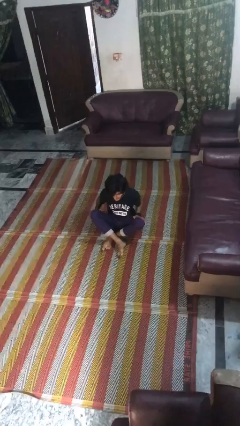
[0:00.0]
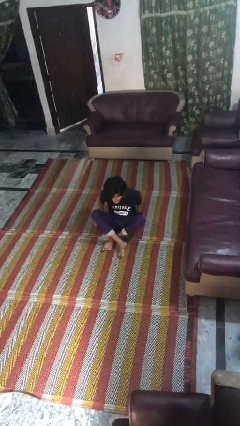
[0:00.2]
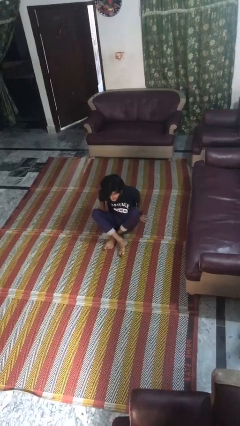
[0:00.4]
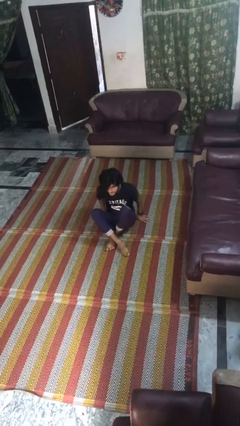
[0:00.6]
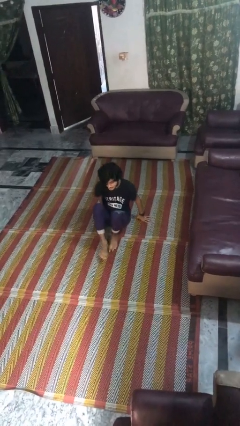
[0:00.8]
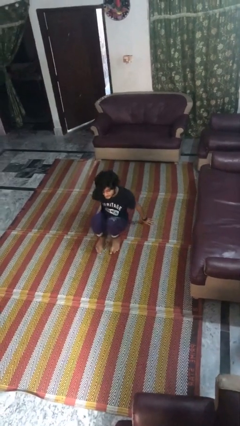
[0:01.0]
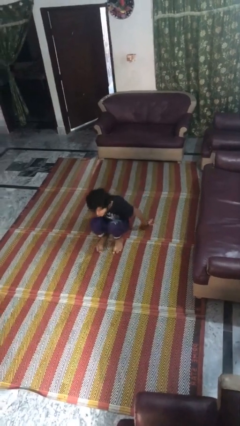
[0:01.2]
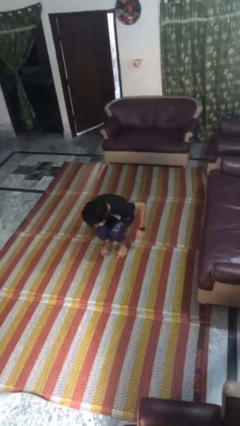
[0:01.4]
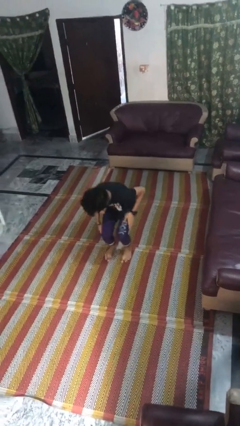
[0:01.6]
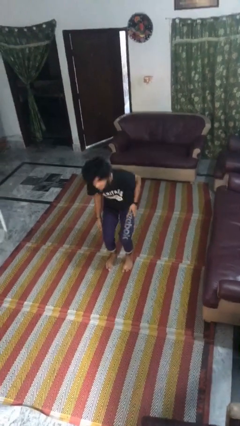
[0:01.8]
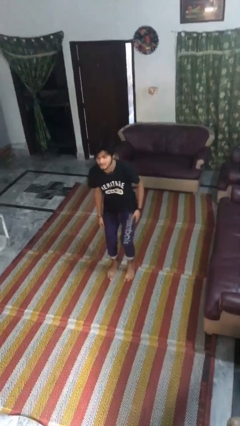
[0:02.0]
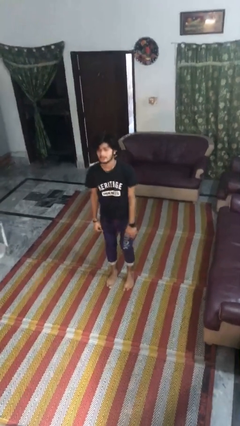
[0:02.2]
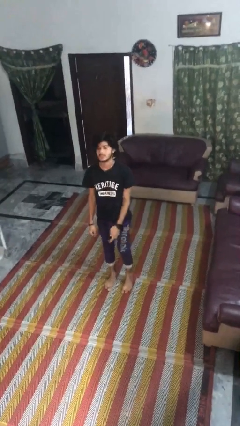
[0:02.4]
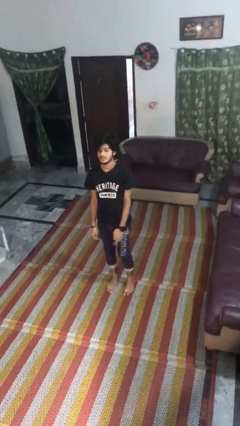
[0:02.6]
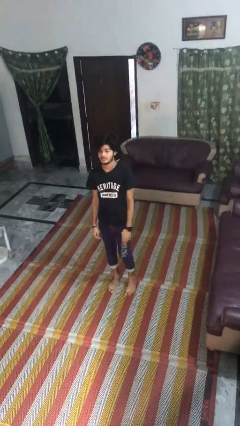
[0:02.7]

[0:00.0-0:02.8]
person stands up from floor

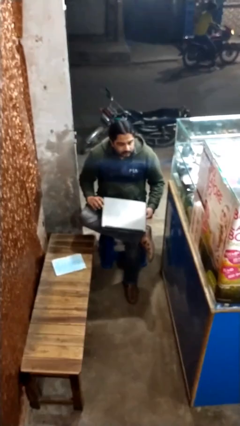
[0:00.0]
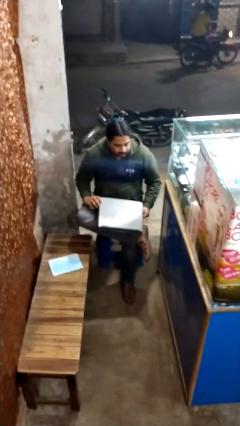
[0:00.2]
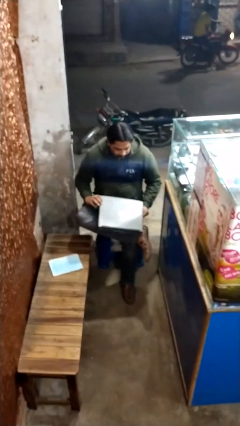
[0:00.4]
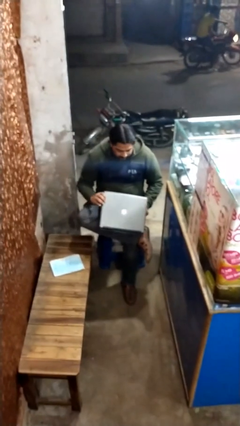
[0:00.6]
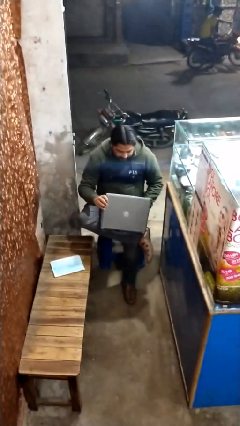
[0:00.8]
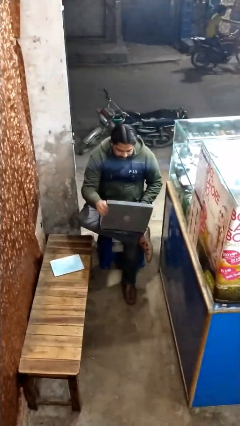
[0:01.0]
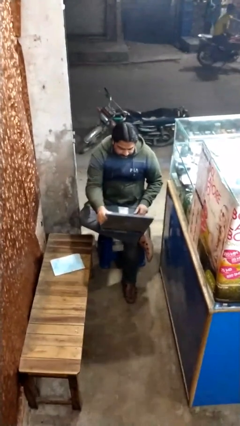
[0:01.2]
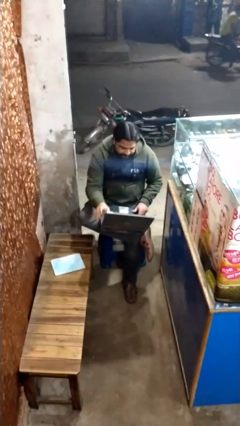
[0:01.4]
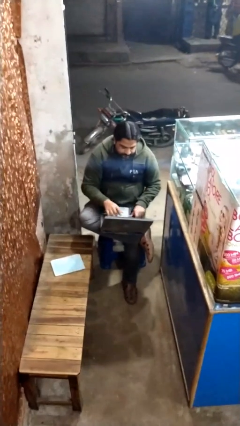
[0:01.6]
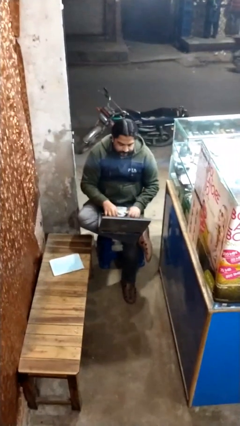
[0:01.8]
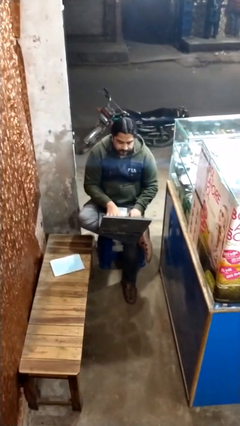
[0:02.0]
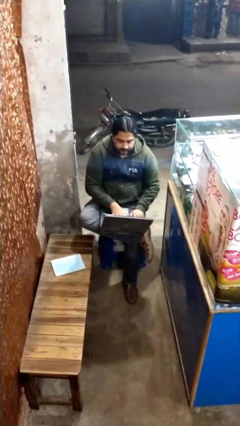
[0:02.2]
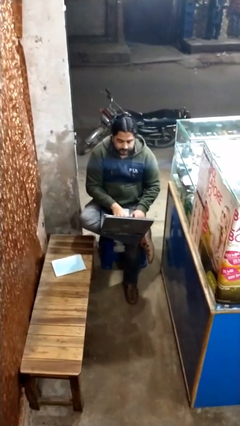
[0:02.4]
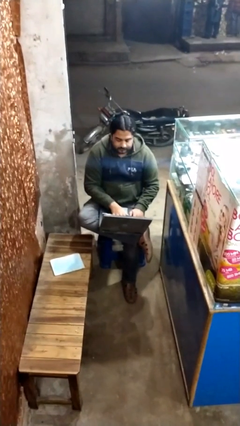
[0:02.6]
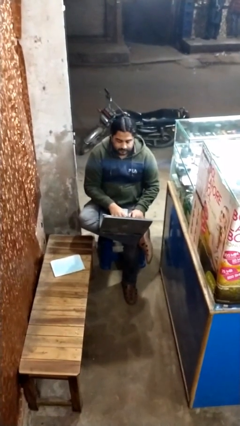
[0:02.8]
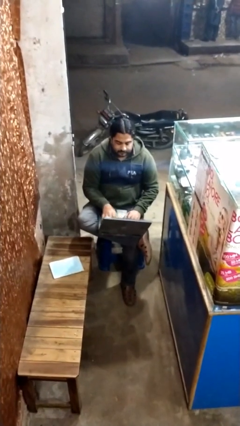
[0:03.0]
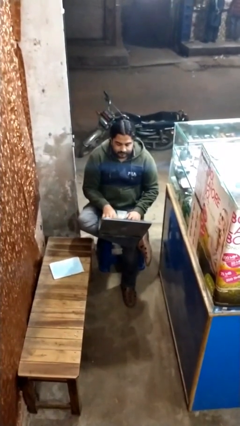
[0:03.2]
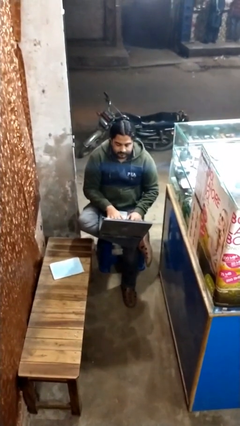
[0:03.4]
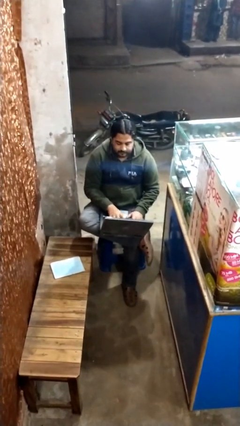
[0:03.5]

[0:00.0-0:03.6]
person interacts with laptop

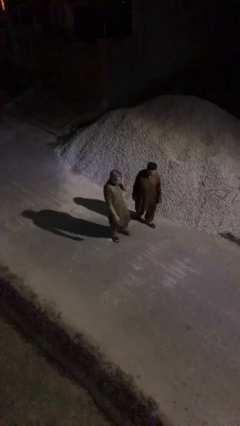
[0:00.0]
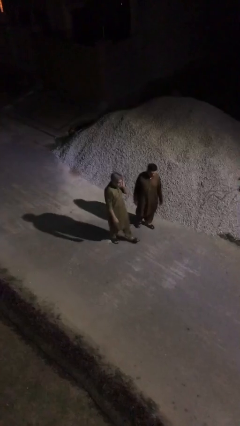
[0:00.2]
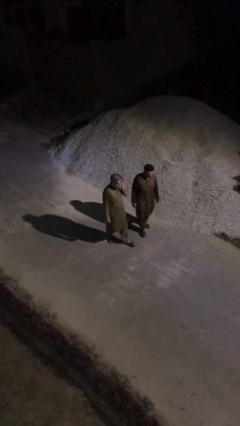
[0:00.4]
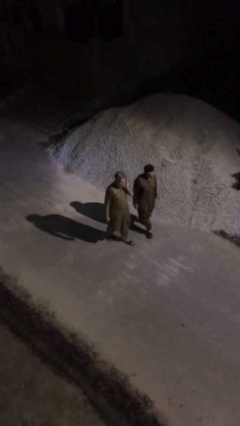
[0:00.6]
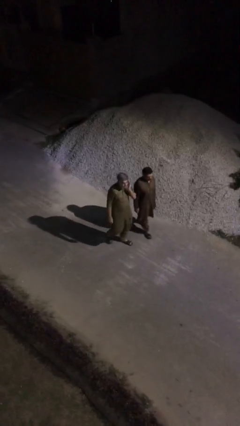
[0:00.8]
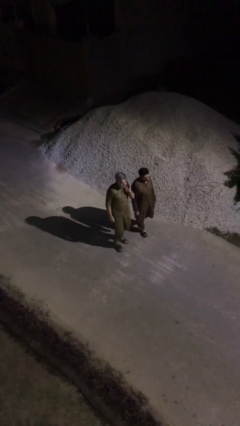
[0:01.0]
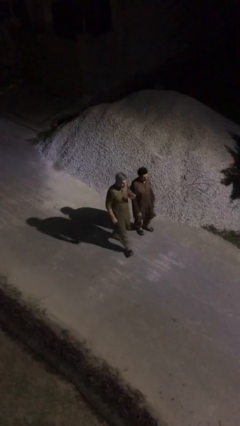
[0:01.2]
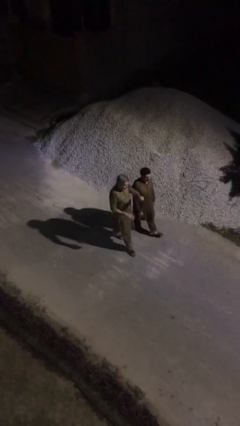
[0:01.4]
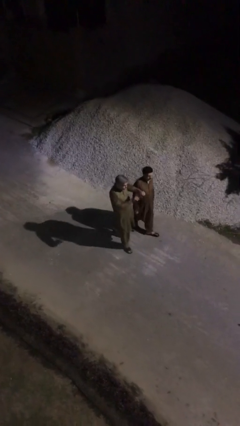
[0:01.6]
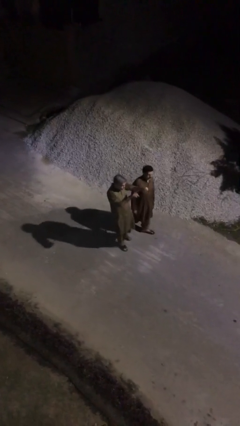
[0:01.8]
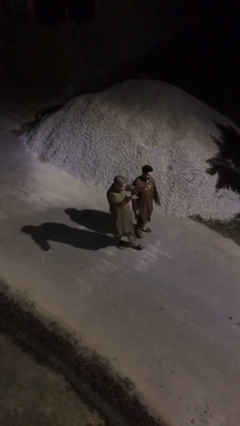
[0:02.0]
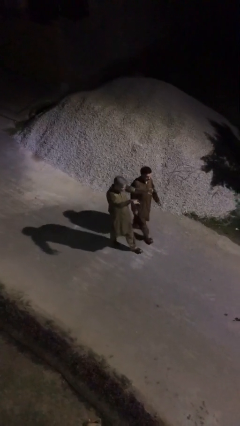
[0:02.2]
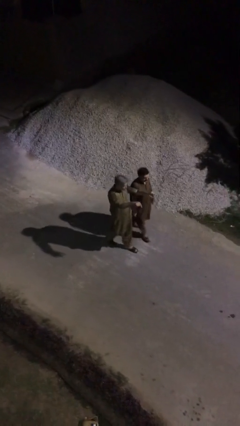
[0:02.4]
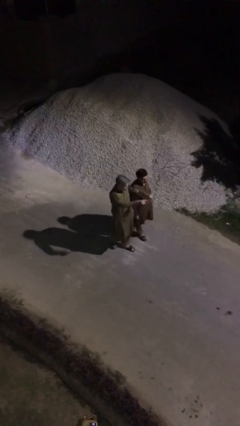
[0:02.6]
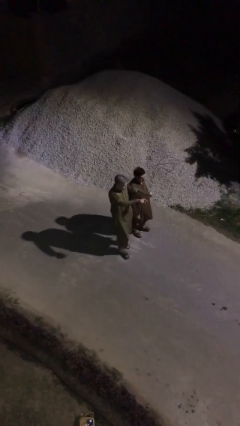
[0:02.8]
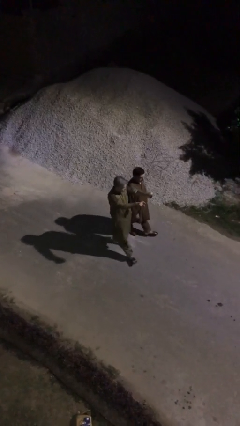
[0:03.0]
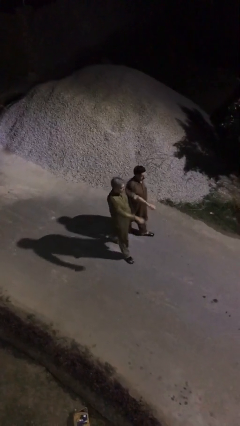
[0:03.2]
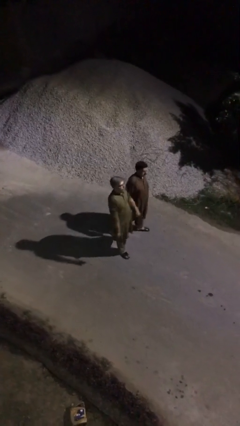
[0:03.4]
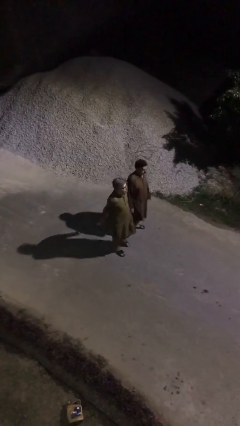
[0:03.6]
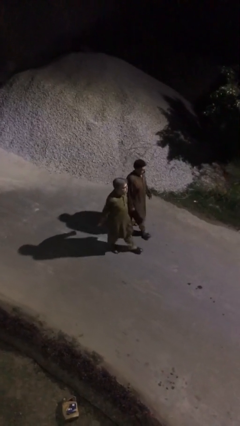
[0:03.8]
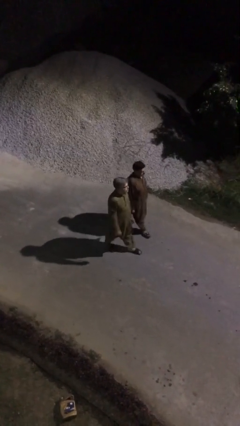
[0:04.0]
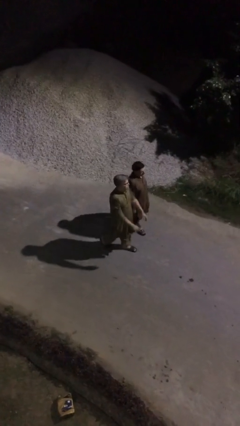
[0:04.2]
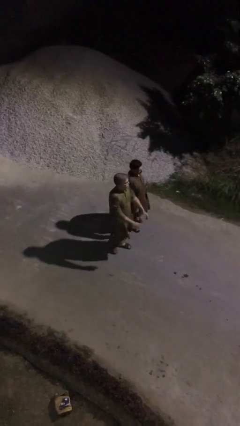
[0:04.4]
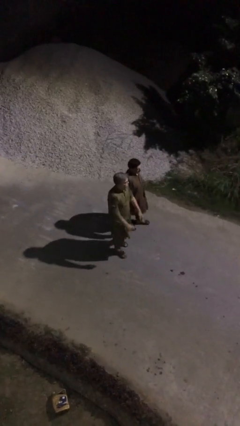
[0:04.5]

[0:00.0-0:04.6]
person talks to person

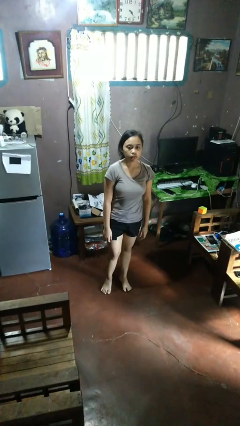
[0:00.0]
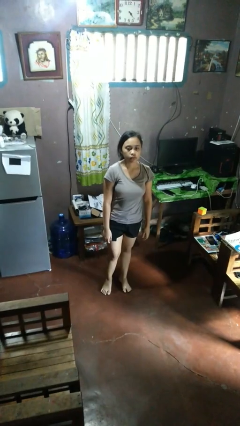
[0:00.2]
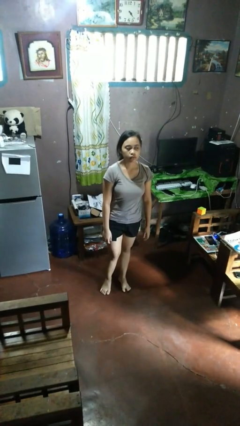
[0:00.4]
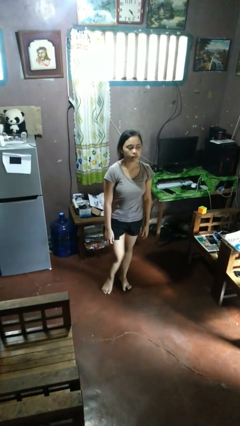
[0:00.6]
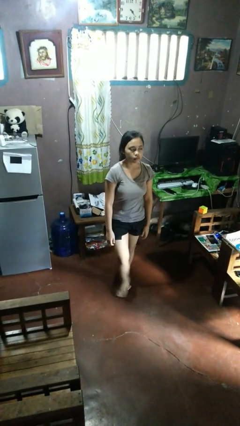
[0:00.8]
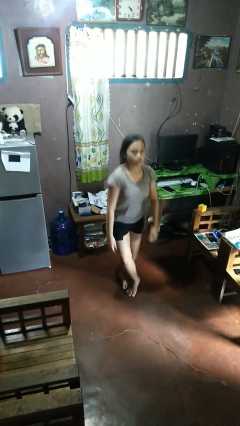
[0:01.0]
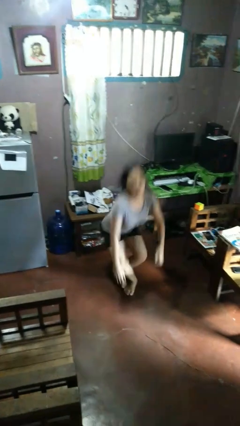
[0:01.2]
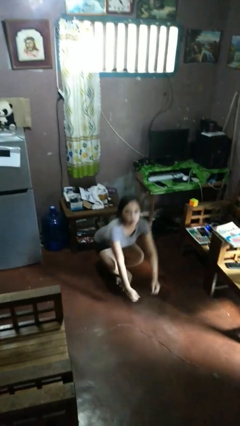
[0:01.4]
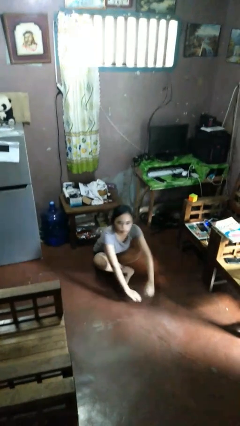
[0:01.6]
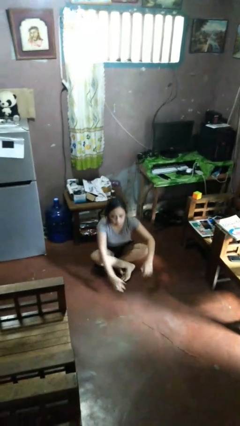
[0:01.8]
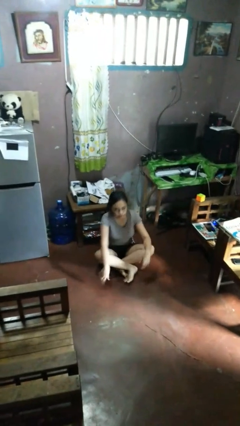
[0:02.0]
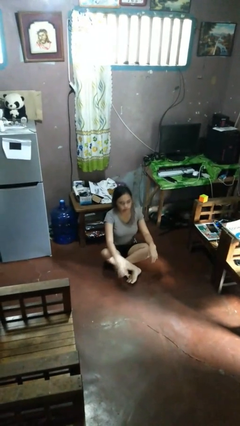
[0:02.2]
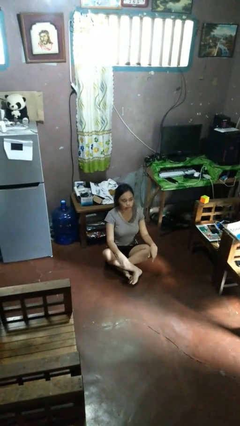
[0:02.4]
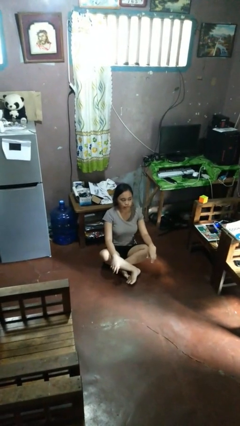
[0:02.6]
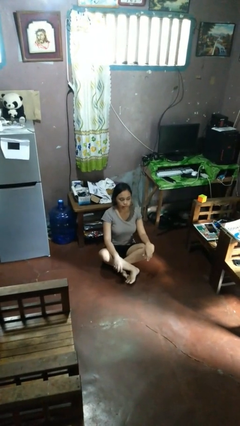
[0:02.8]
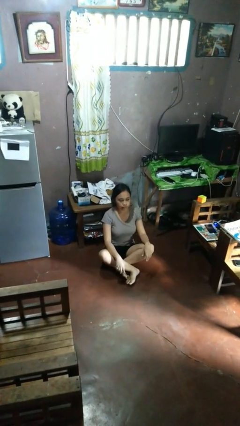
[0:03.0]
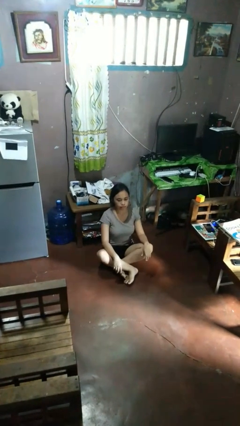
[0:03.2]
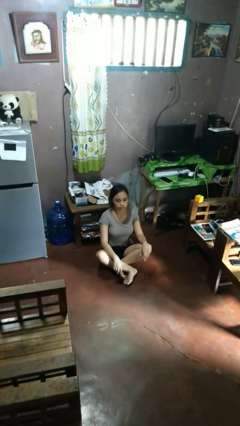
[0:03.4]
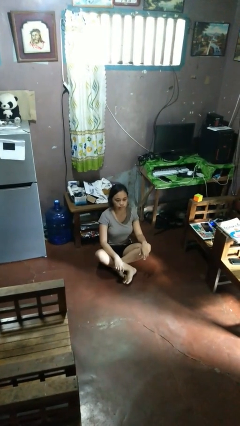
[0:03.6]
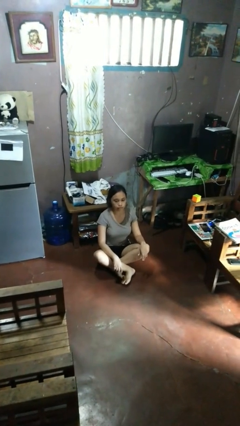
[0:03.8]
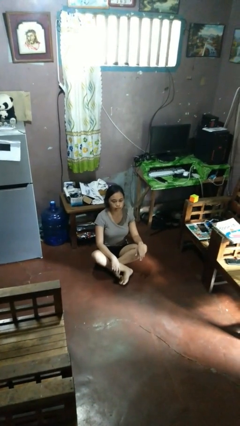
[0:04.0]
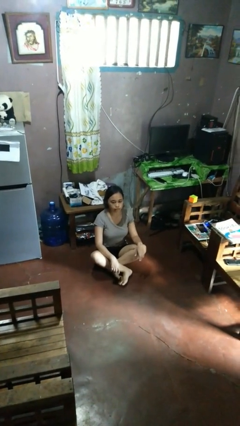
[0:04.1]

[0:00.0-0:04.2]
person sits crisscross

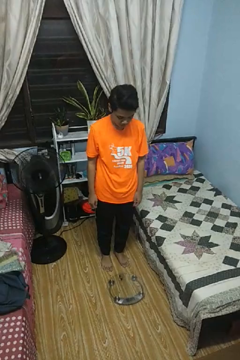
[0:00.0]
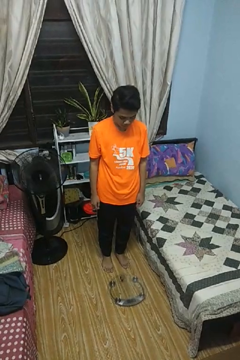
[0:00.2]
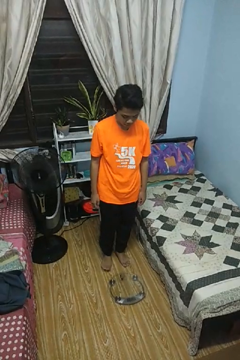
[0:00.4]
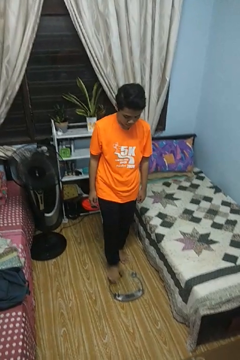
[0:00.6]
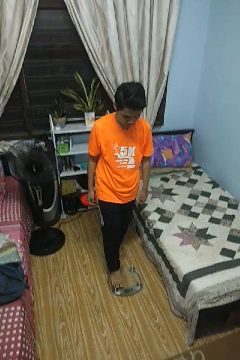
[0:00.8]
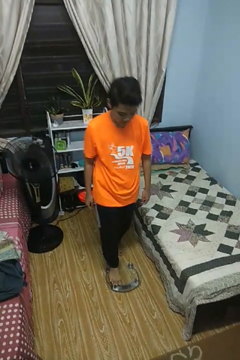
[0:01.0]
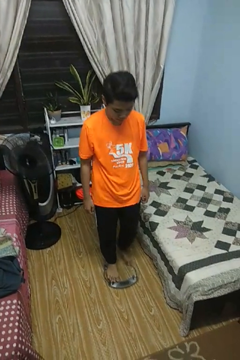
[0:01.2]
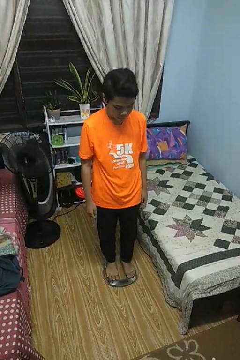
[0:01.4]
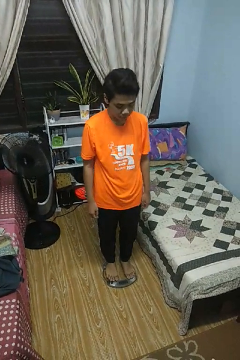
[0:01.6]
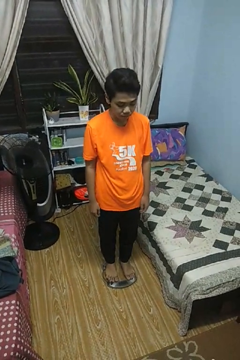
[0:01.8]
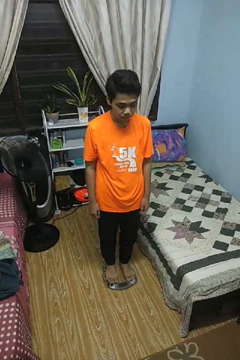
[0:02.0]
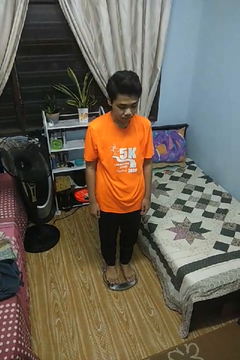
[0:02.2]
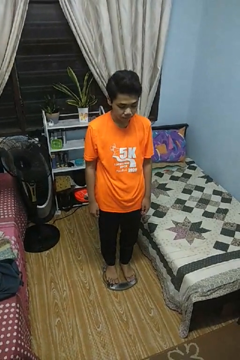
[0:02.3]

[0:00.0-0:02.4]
person uses bodyweight scale

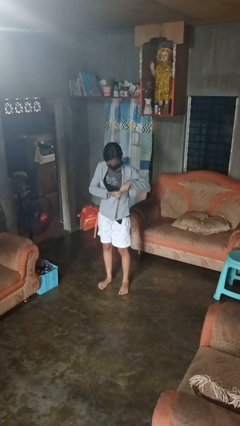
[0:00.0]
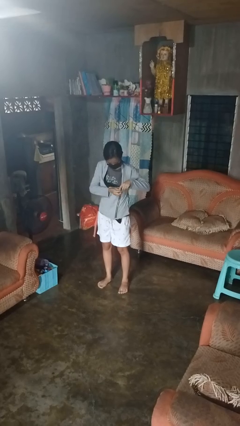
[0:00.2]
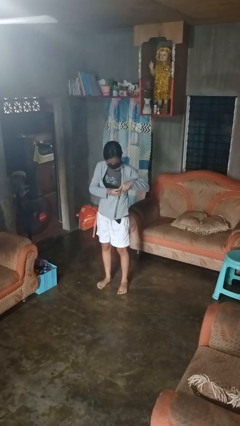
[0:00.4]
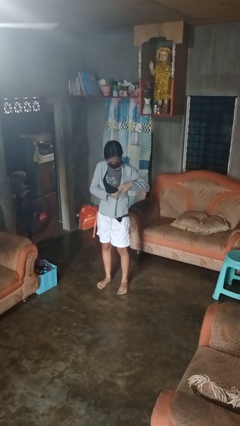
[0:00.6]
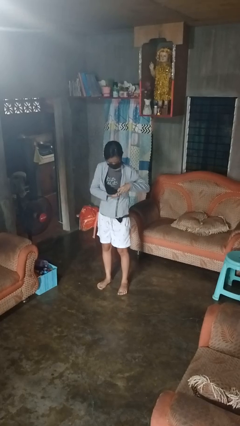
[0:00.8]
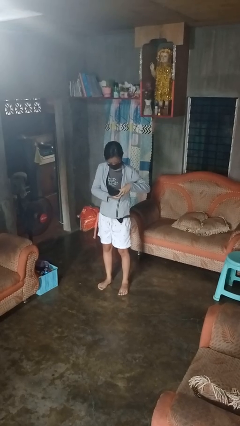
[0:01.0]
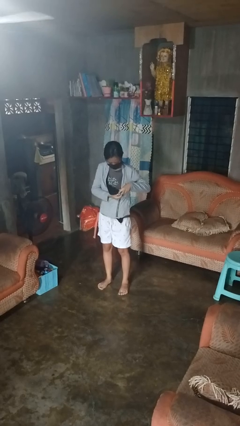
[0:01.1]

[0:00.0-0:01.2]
person unzips jacket
